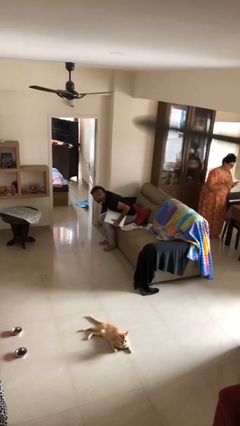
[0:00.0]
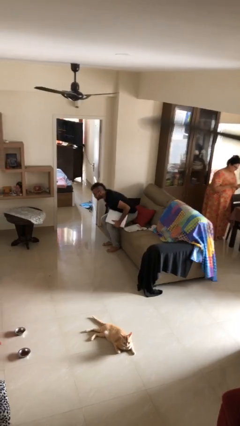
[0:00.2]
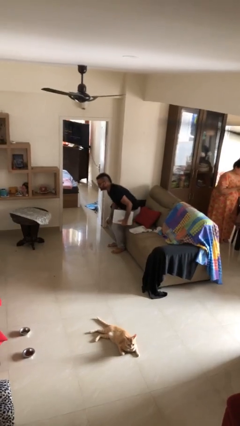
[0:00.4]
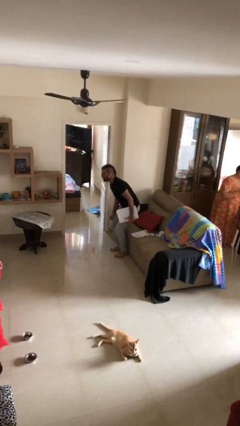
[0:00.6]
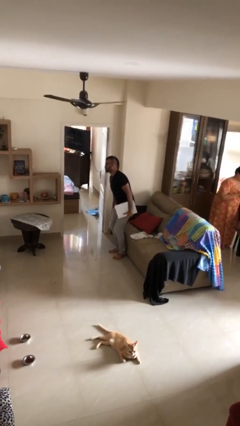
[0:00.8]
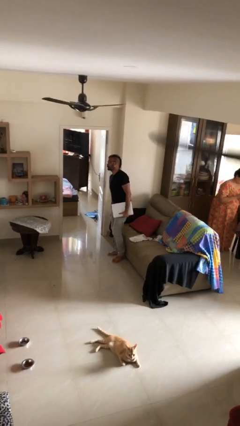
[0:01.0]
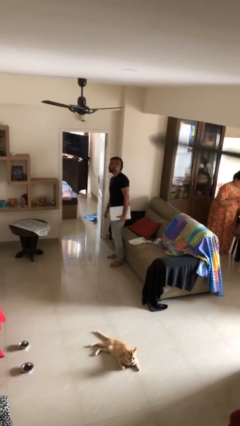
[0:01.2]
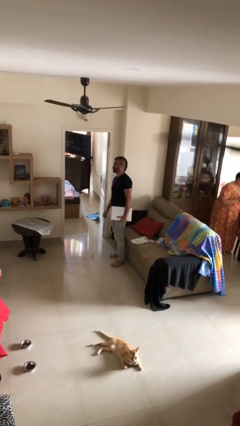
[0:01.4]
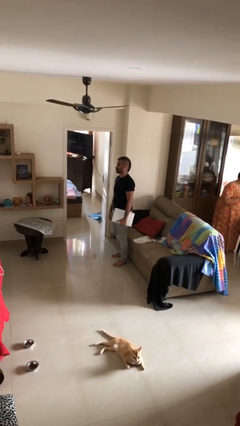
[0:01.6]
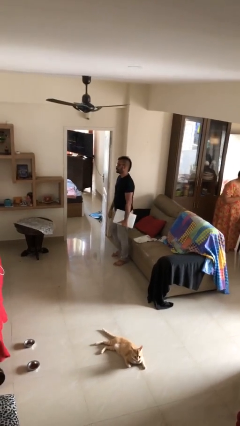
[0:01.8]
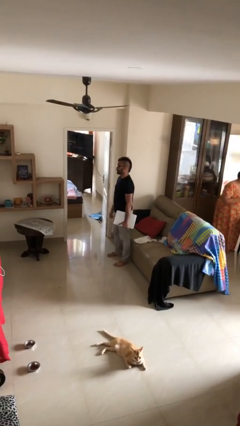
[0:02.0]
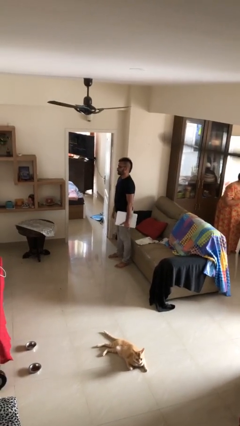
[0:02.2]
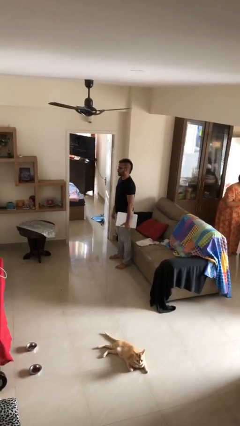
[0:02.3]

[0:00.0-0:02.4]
person stands up

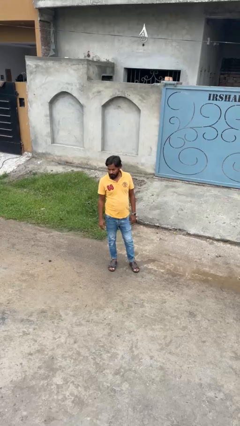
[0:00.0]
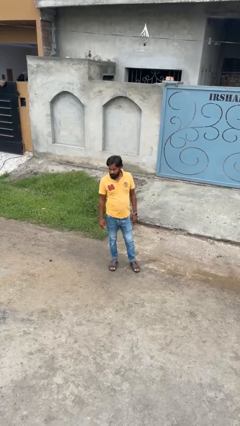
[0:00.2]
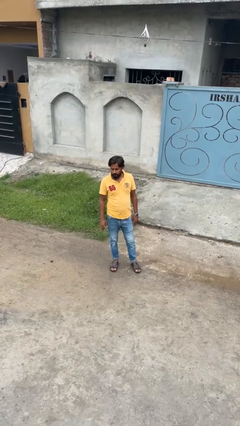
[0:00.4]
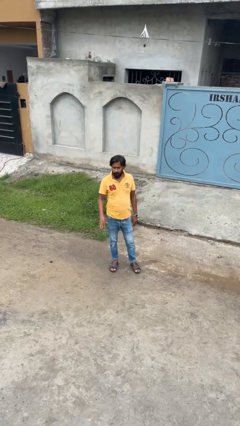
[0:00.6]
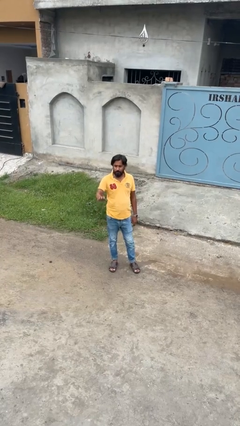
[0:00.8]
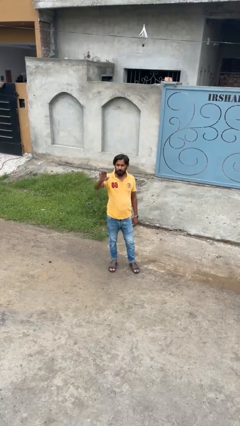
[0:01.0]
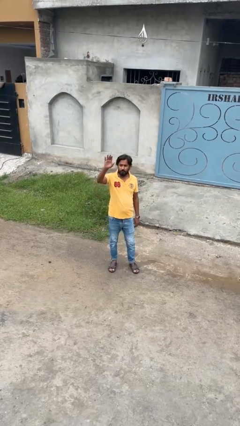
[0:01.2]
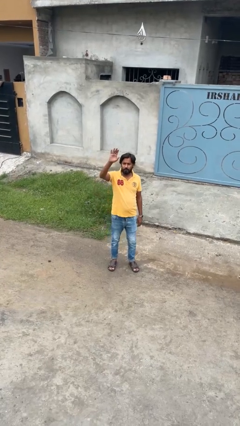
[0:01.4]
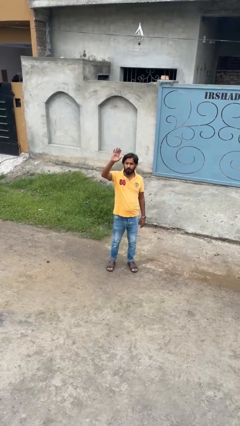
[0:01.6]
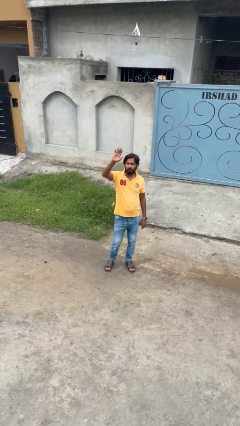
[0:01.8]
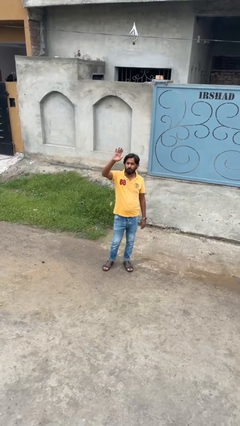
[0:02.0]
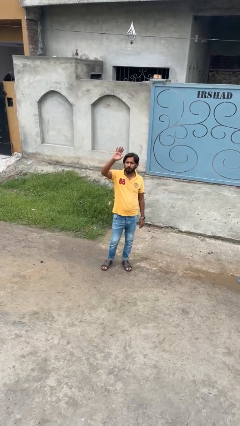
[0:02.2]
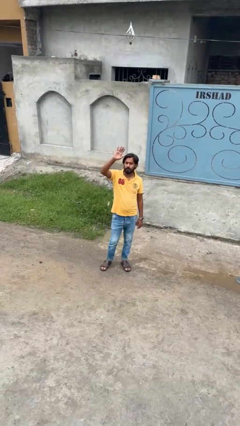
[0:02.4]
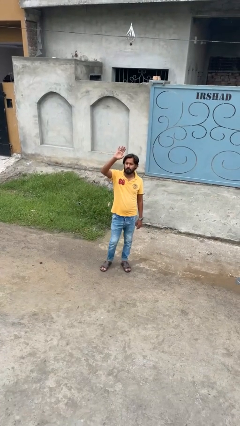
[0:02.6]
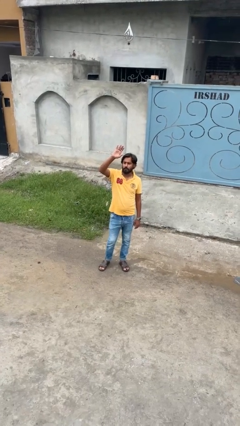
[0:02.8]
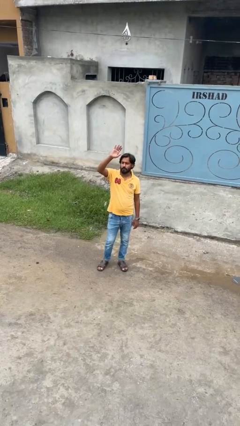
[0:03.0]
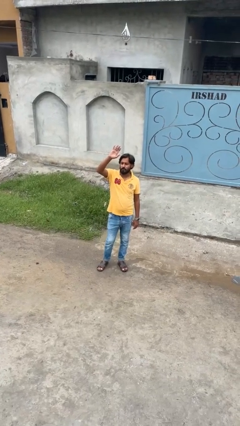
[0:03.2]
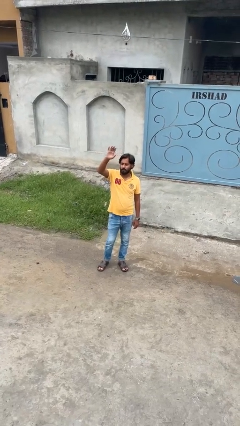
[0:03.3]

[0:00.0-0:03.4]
person gestures raise hand

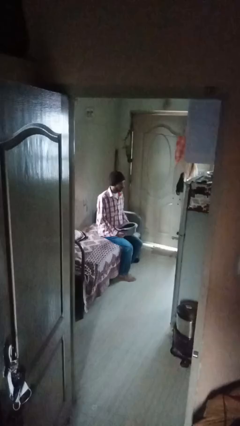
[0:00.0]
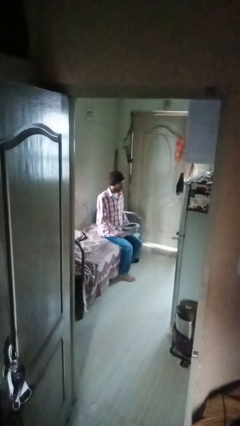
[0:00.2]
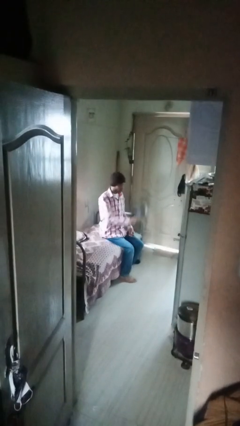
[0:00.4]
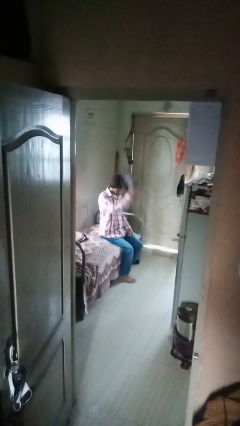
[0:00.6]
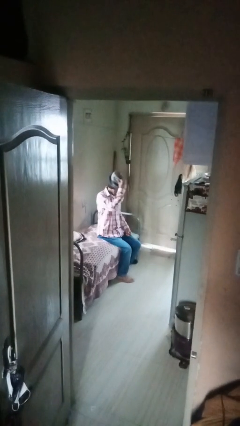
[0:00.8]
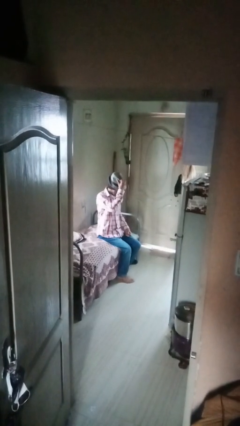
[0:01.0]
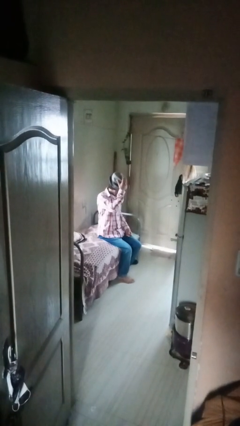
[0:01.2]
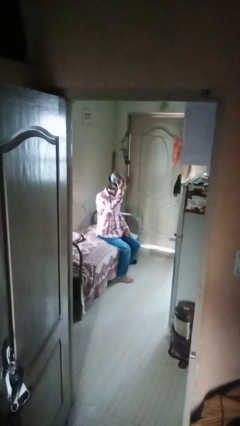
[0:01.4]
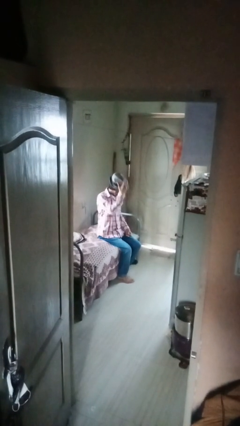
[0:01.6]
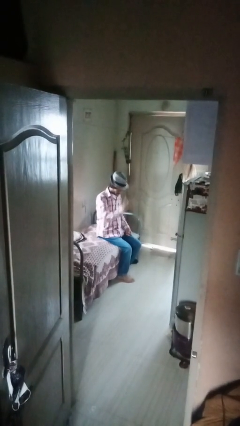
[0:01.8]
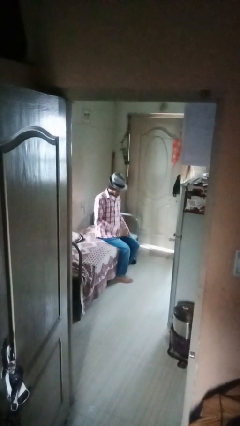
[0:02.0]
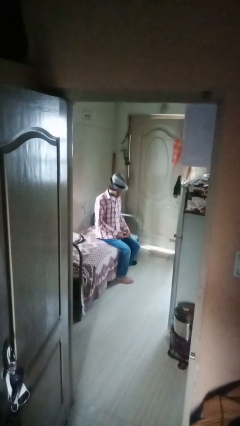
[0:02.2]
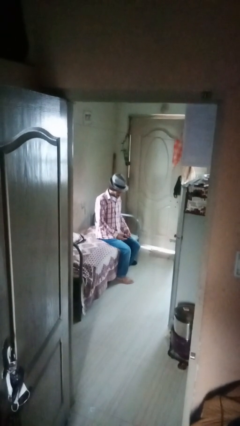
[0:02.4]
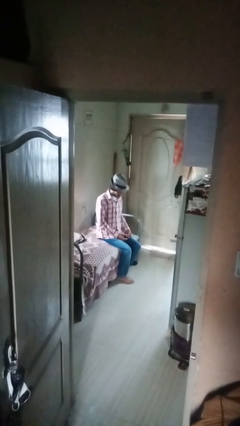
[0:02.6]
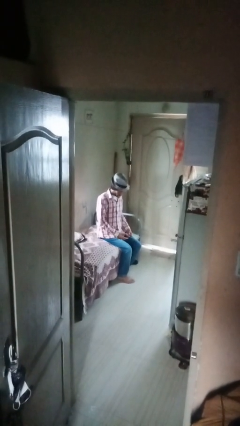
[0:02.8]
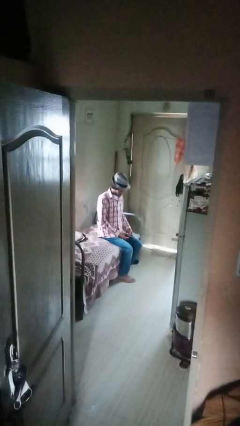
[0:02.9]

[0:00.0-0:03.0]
person puts on hat

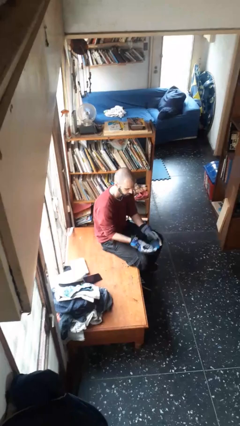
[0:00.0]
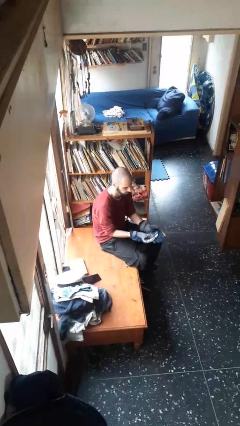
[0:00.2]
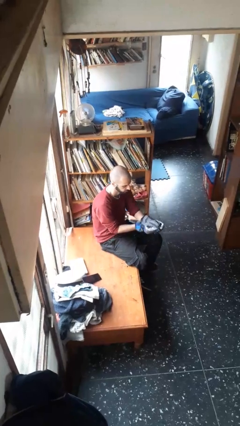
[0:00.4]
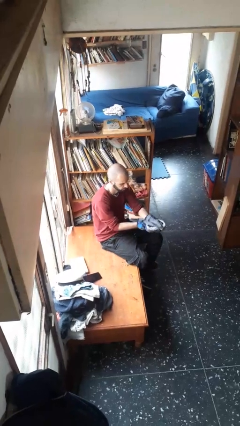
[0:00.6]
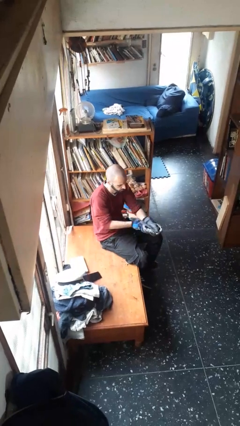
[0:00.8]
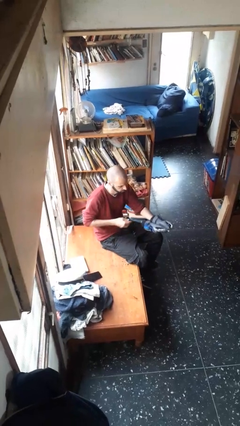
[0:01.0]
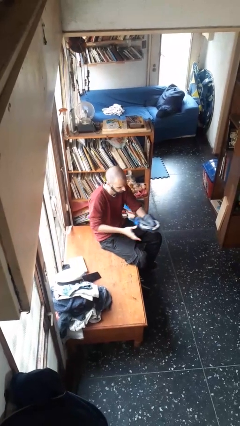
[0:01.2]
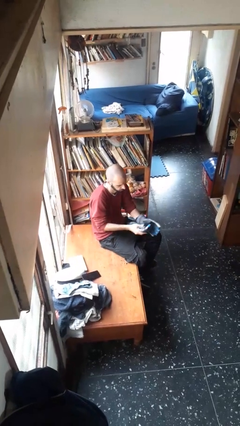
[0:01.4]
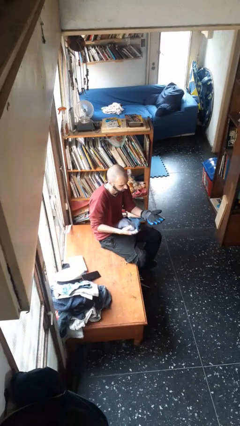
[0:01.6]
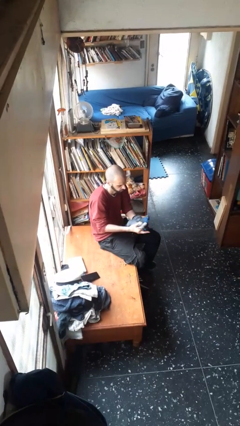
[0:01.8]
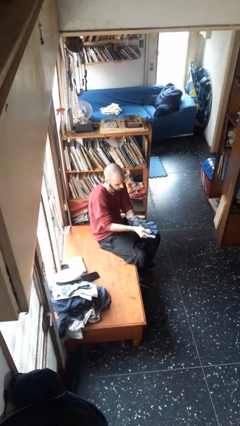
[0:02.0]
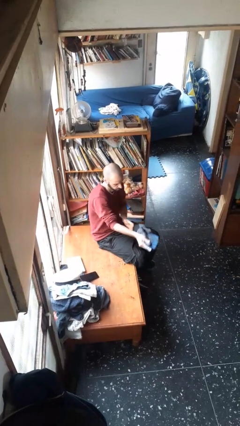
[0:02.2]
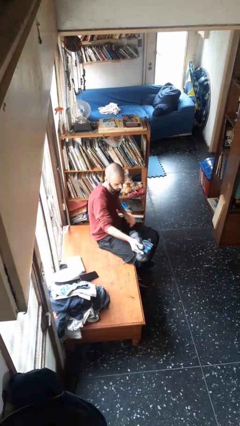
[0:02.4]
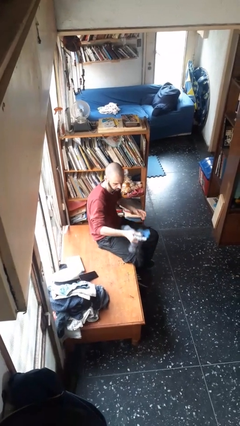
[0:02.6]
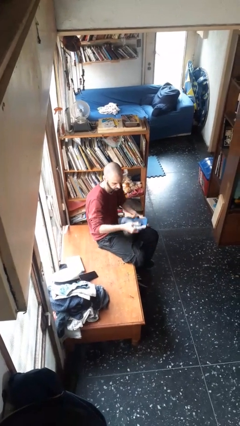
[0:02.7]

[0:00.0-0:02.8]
person takes off gloves

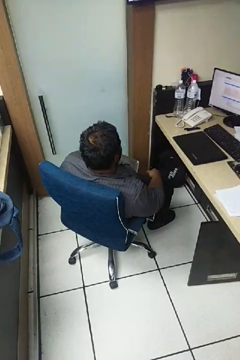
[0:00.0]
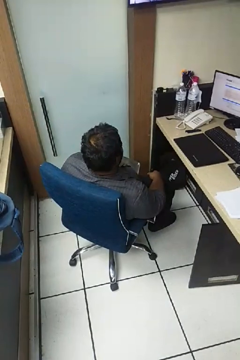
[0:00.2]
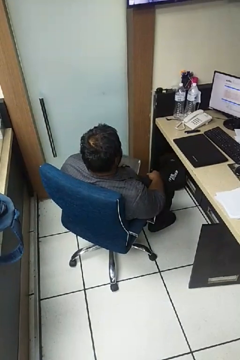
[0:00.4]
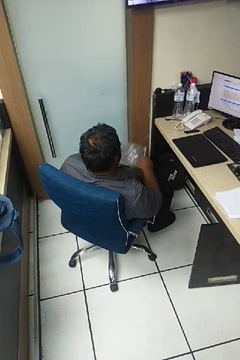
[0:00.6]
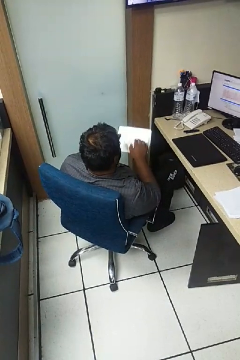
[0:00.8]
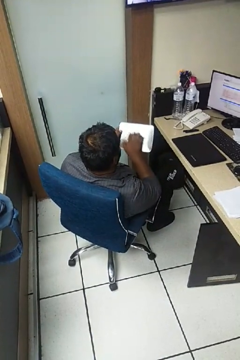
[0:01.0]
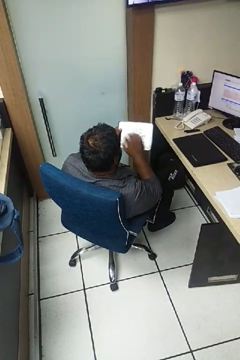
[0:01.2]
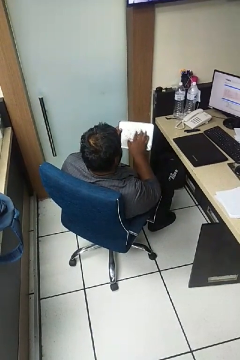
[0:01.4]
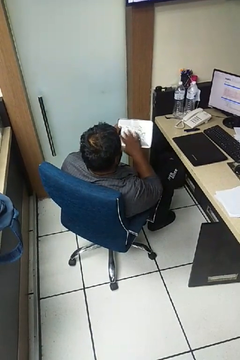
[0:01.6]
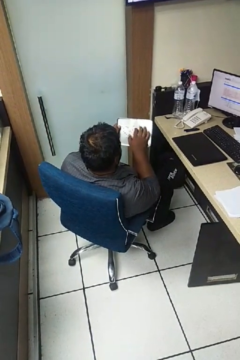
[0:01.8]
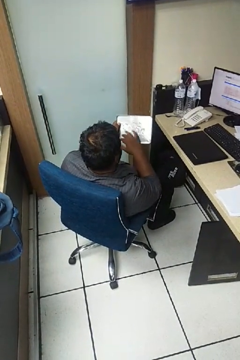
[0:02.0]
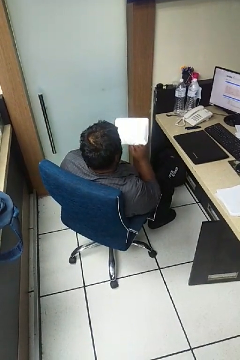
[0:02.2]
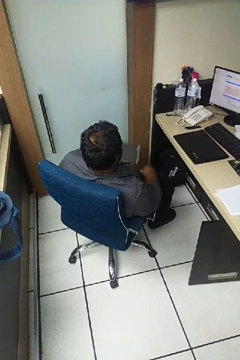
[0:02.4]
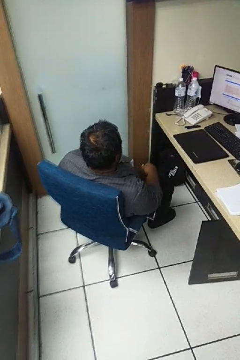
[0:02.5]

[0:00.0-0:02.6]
person interacts with tablet

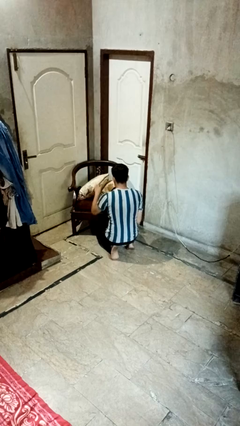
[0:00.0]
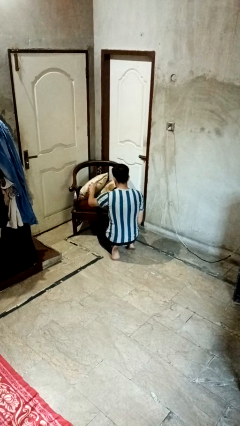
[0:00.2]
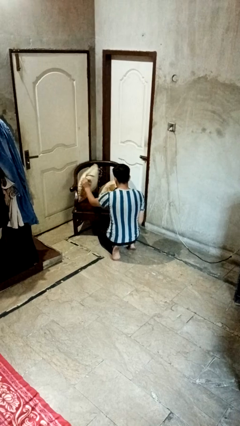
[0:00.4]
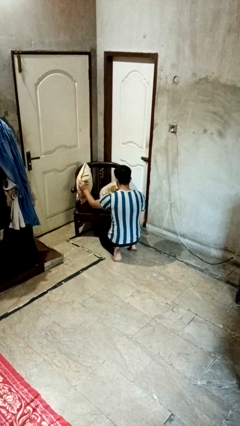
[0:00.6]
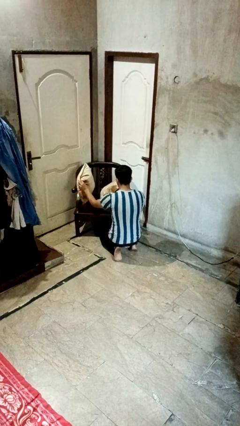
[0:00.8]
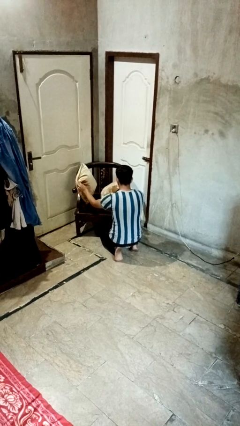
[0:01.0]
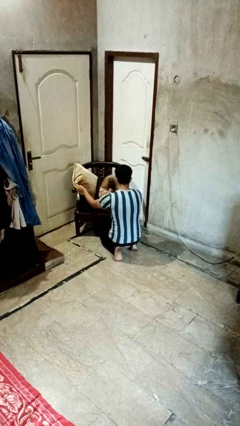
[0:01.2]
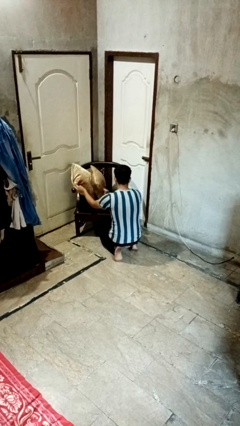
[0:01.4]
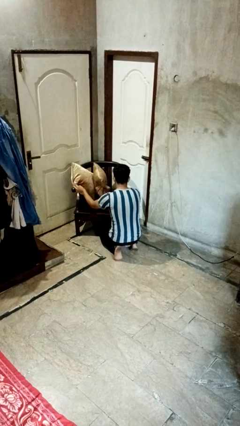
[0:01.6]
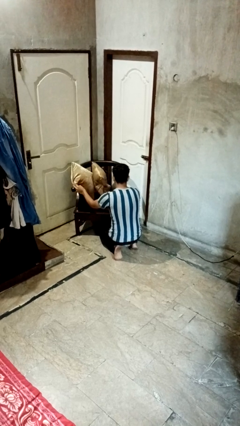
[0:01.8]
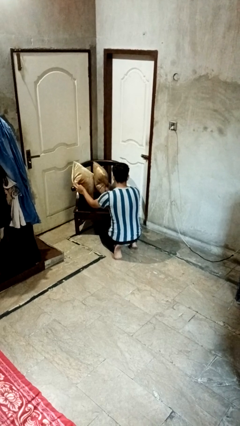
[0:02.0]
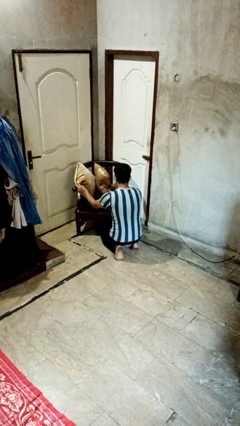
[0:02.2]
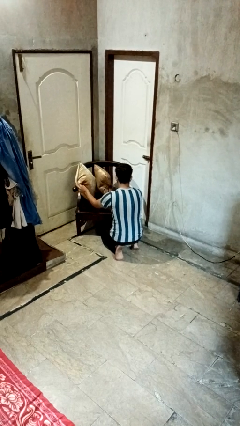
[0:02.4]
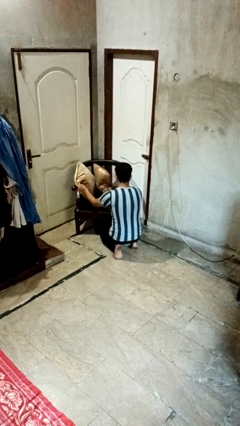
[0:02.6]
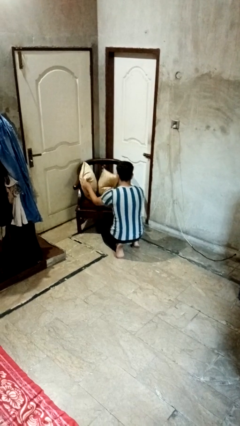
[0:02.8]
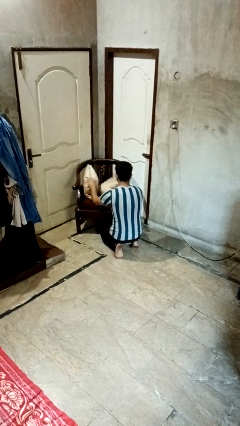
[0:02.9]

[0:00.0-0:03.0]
person searches in couch

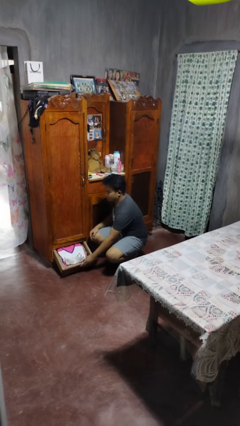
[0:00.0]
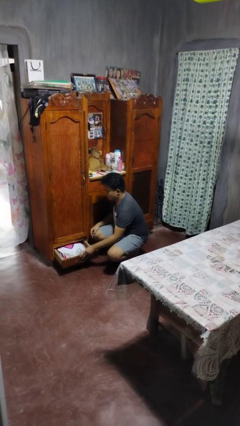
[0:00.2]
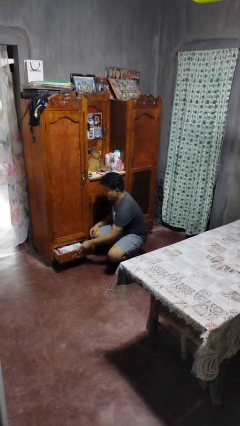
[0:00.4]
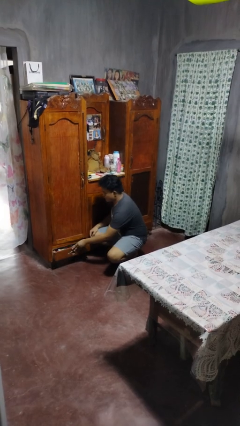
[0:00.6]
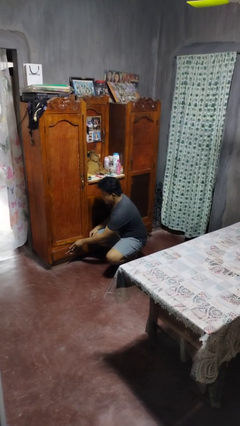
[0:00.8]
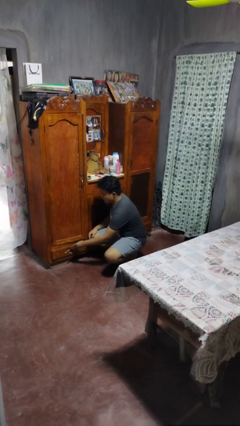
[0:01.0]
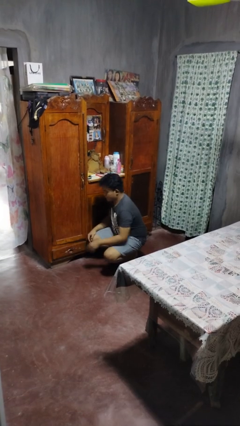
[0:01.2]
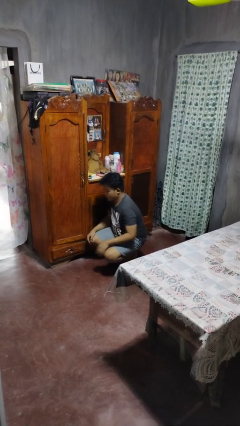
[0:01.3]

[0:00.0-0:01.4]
person closes dresser drawer
